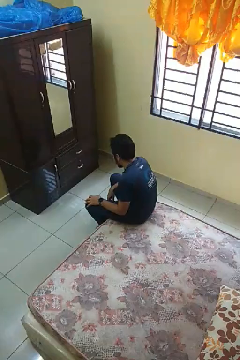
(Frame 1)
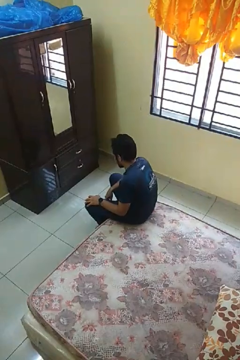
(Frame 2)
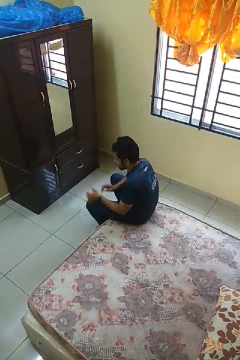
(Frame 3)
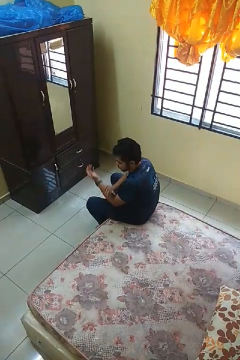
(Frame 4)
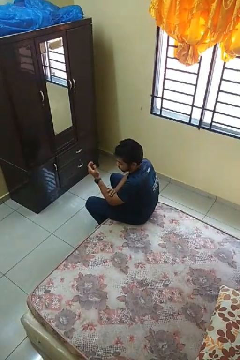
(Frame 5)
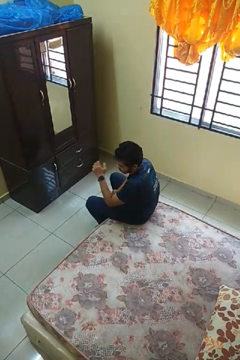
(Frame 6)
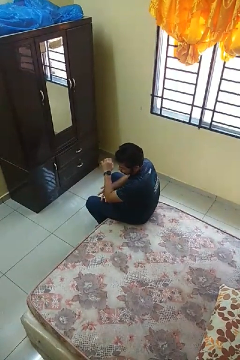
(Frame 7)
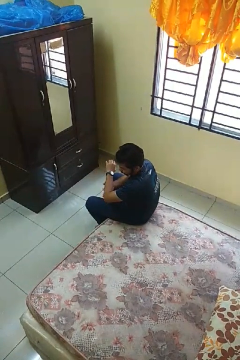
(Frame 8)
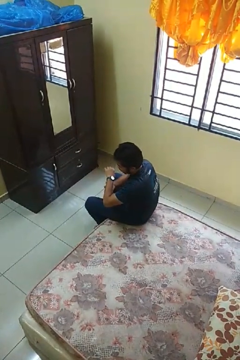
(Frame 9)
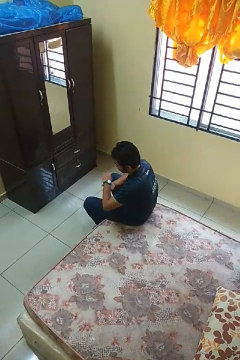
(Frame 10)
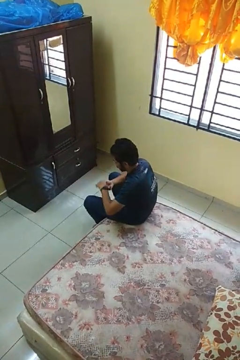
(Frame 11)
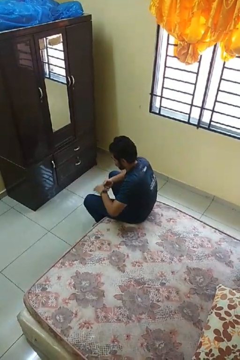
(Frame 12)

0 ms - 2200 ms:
person looks at hands in lap

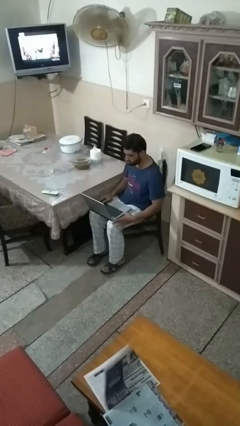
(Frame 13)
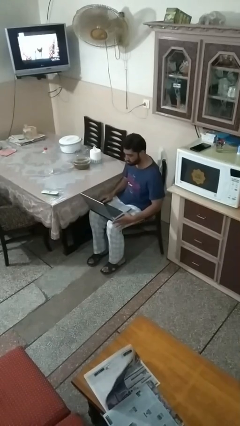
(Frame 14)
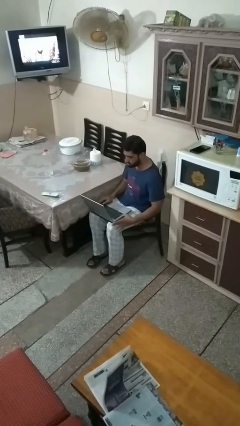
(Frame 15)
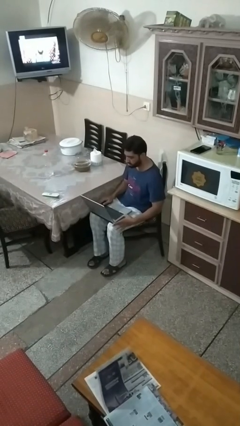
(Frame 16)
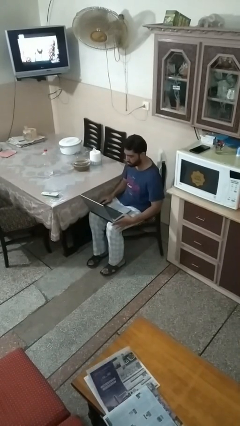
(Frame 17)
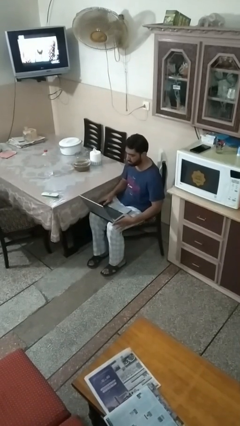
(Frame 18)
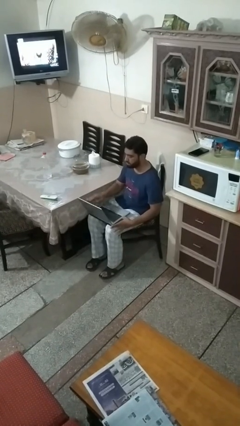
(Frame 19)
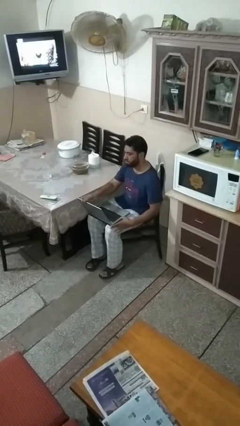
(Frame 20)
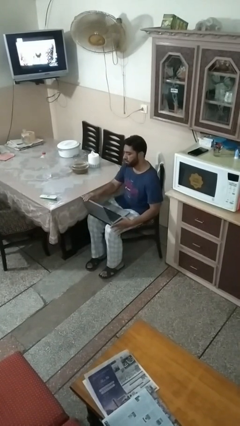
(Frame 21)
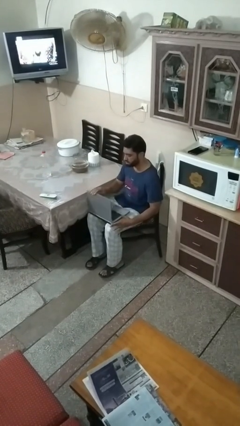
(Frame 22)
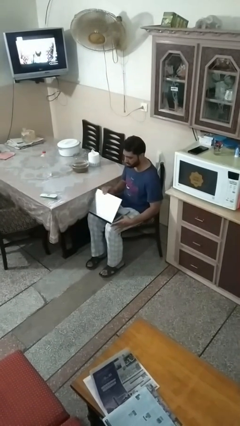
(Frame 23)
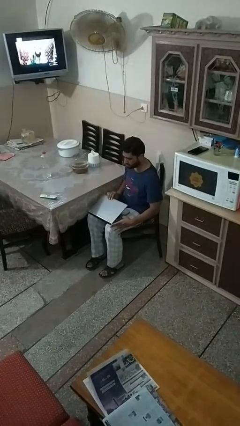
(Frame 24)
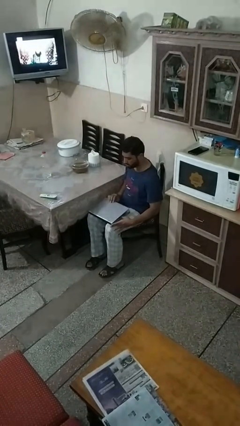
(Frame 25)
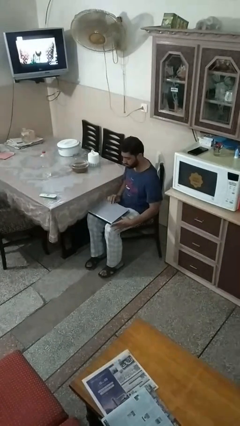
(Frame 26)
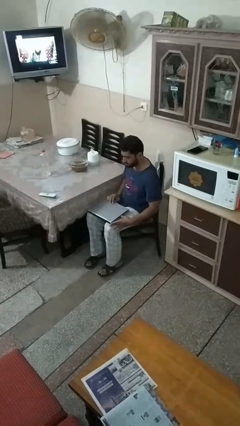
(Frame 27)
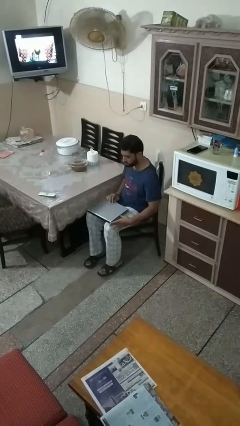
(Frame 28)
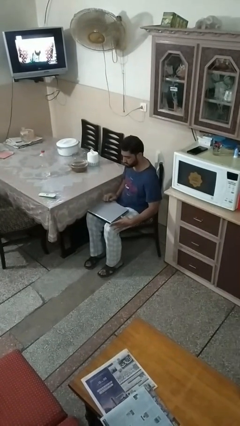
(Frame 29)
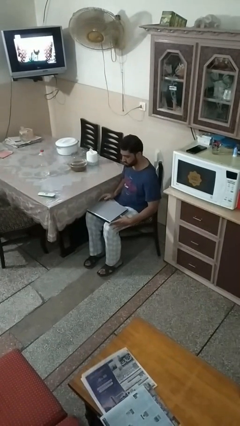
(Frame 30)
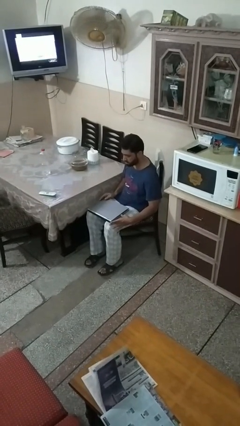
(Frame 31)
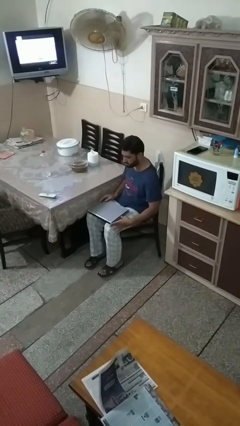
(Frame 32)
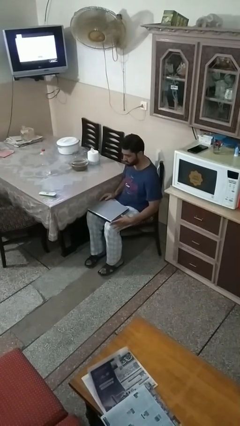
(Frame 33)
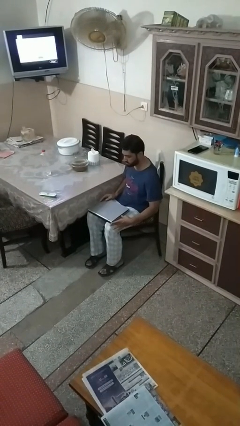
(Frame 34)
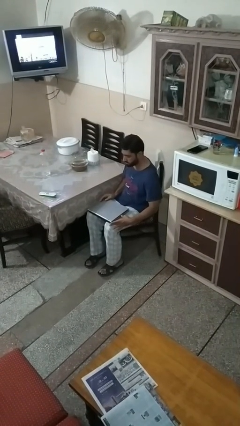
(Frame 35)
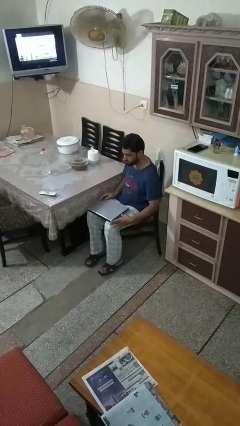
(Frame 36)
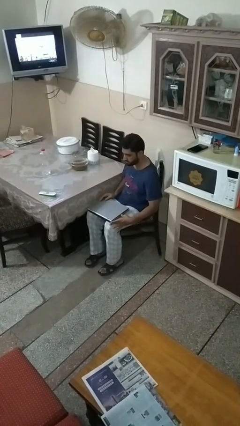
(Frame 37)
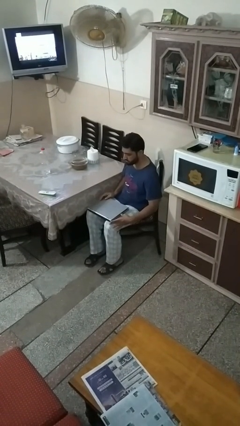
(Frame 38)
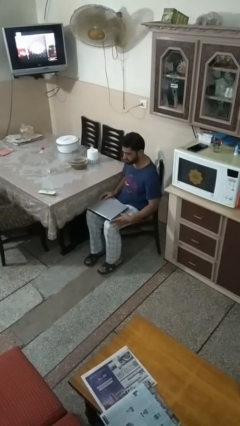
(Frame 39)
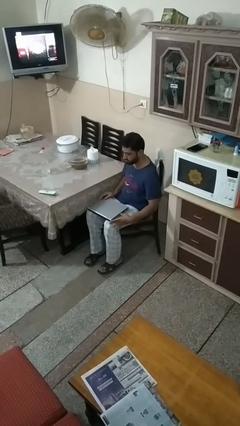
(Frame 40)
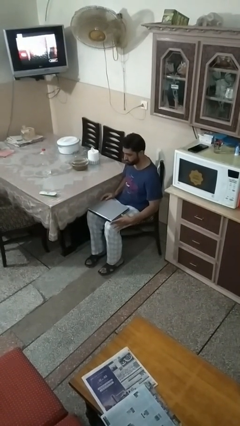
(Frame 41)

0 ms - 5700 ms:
person closes laptop

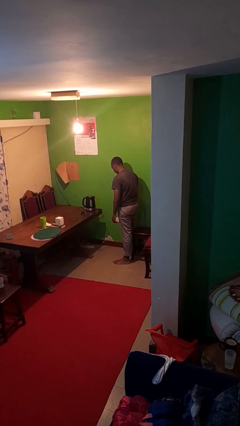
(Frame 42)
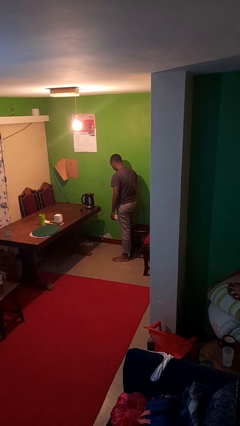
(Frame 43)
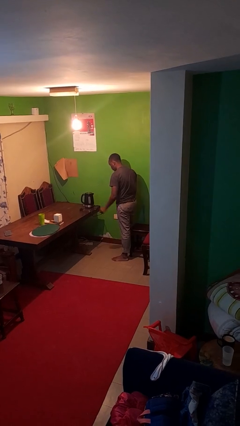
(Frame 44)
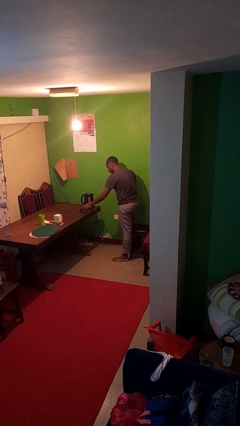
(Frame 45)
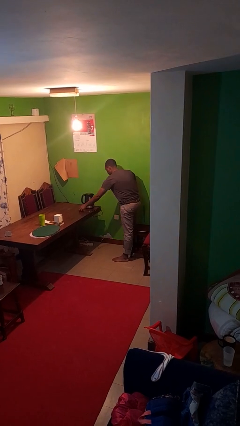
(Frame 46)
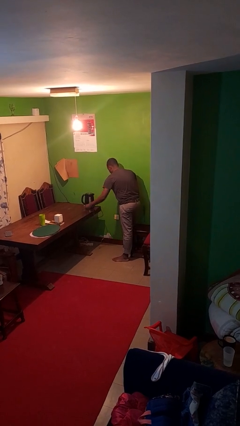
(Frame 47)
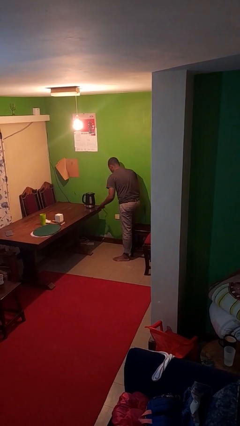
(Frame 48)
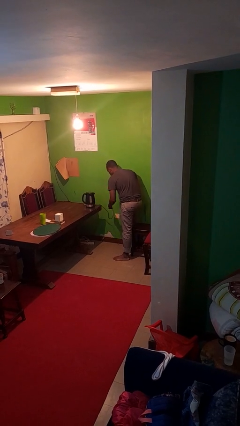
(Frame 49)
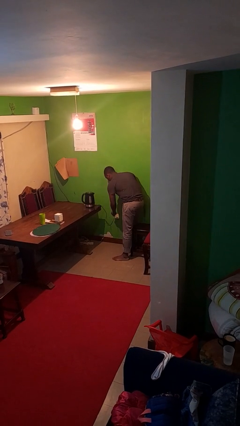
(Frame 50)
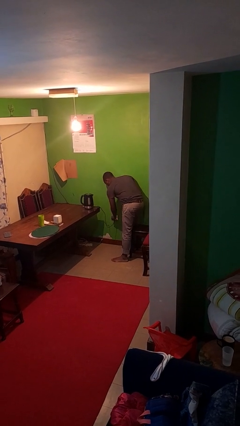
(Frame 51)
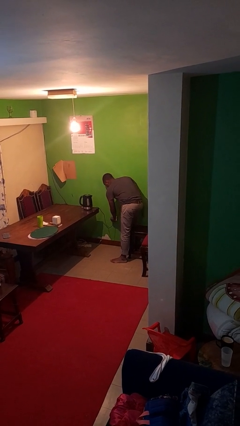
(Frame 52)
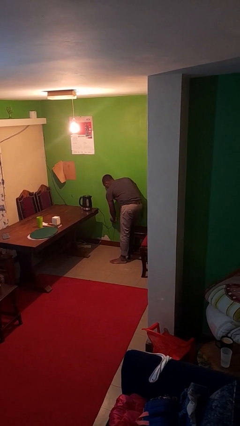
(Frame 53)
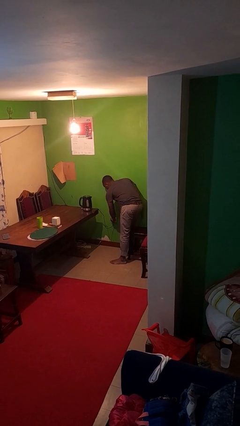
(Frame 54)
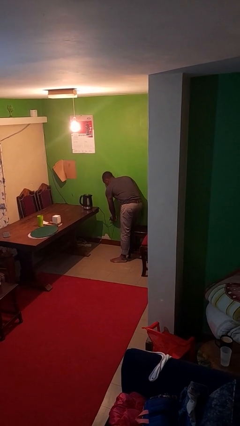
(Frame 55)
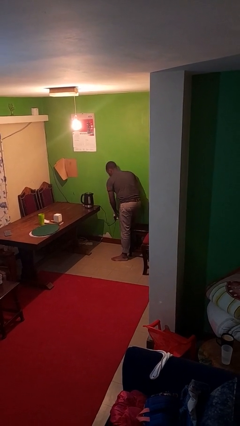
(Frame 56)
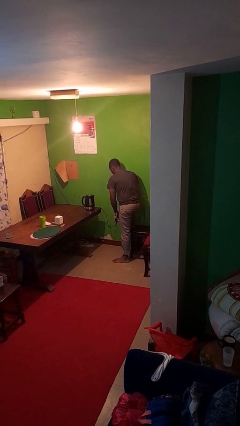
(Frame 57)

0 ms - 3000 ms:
person plugs into electrical socket

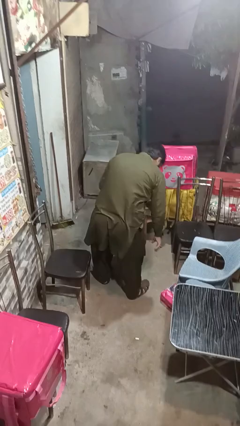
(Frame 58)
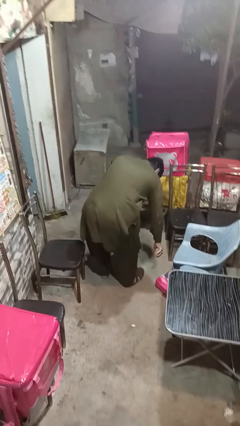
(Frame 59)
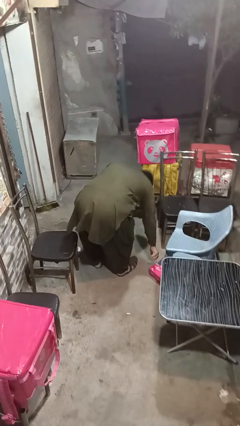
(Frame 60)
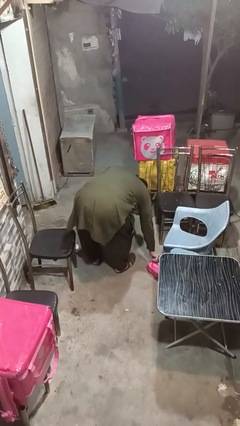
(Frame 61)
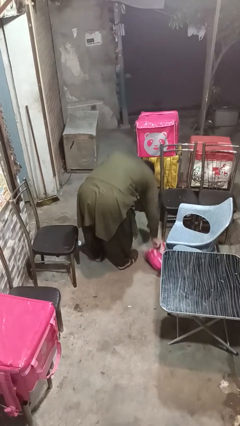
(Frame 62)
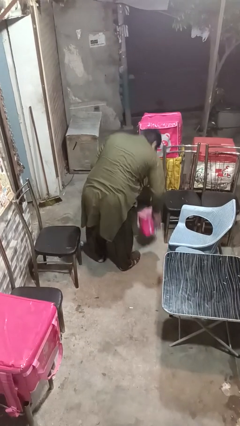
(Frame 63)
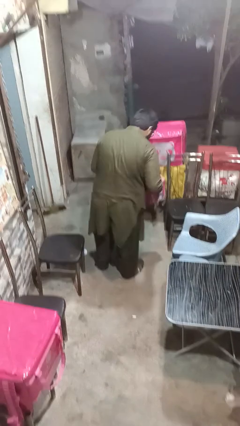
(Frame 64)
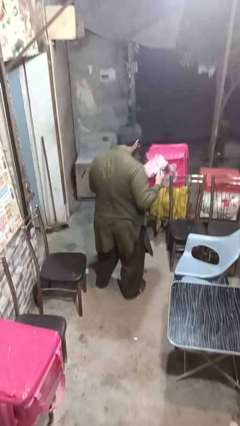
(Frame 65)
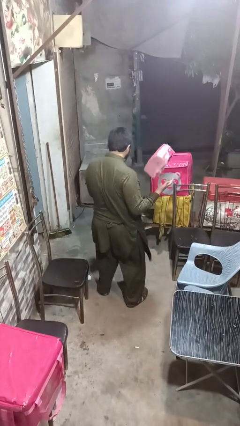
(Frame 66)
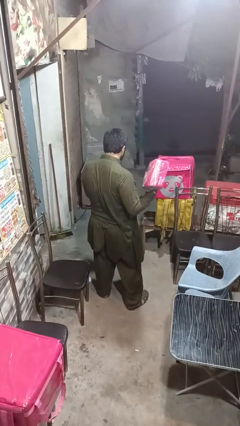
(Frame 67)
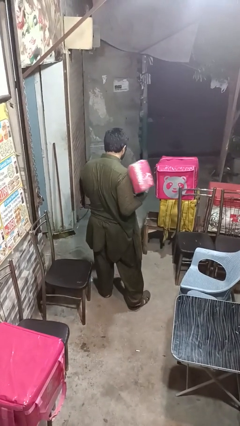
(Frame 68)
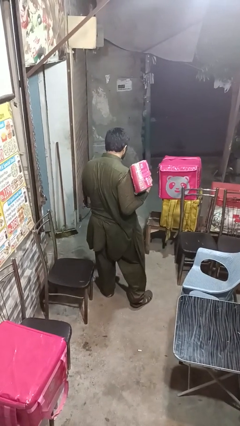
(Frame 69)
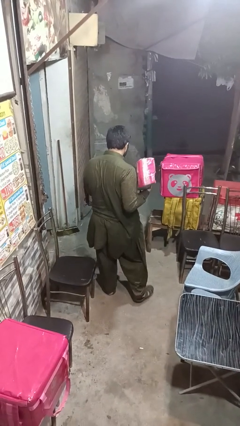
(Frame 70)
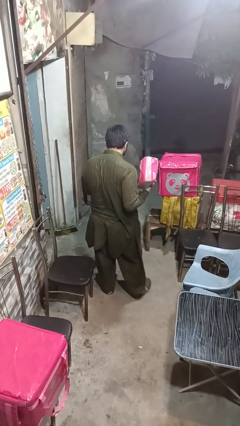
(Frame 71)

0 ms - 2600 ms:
person picks up object from floor

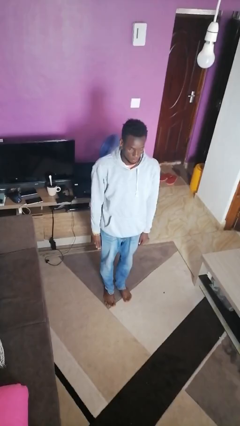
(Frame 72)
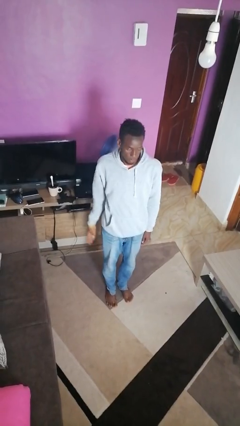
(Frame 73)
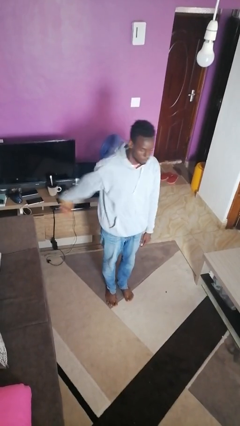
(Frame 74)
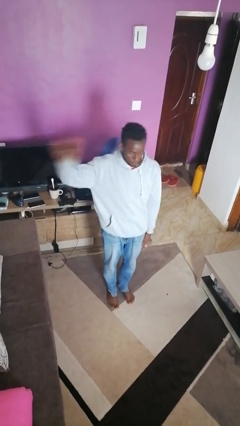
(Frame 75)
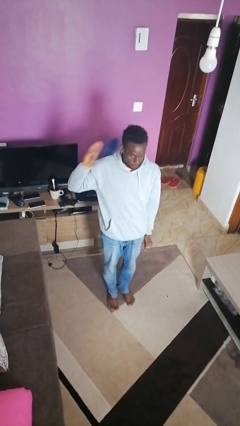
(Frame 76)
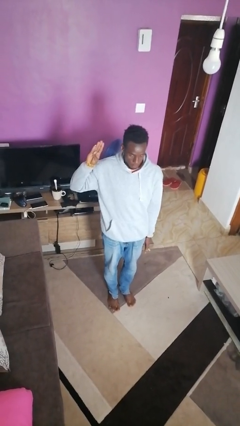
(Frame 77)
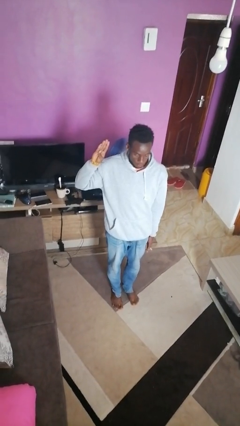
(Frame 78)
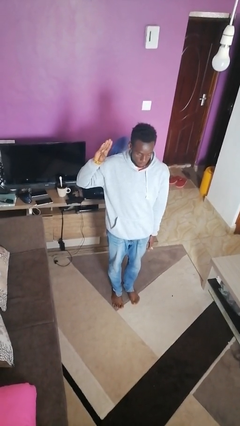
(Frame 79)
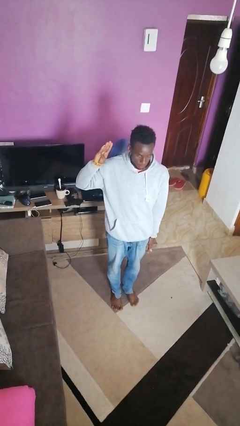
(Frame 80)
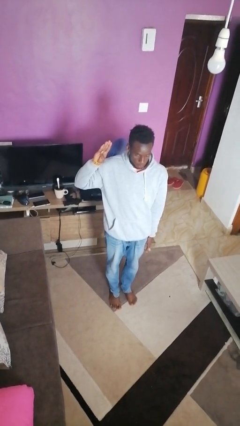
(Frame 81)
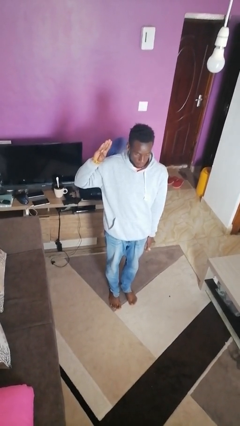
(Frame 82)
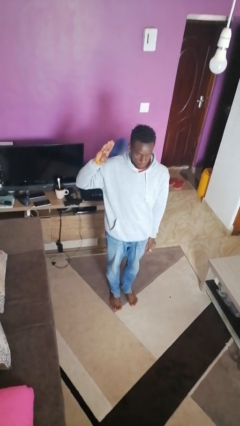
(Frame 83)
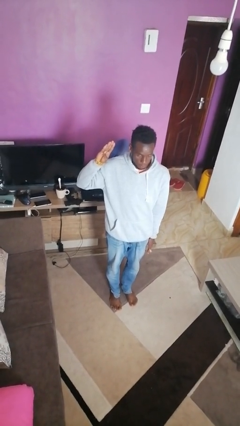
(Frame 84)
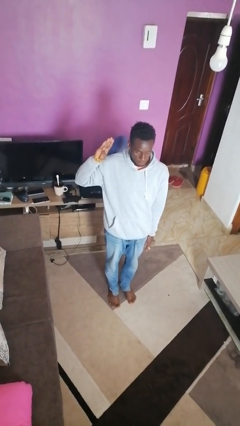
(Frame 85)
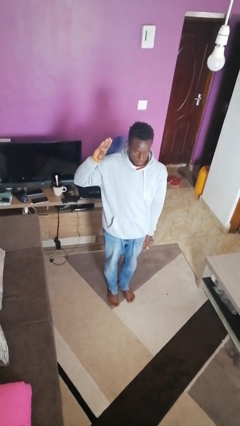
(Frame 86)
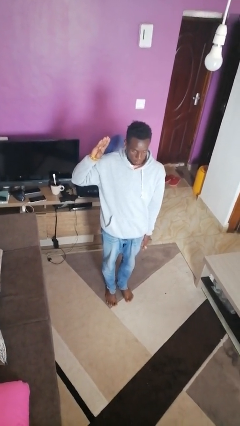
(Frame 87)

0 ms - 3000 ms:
person salutes

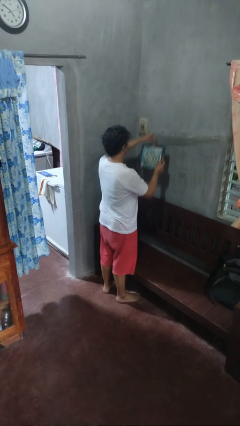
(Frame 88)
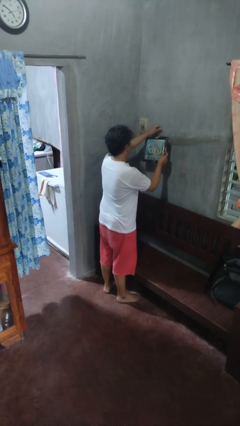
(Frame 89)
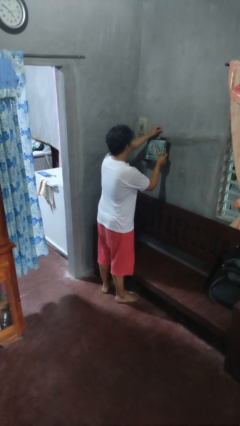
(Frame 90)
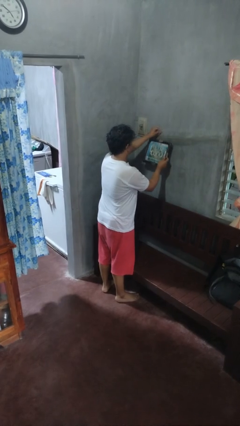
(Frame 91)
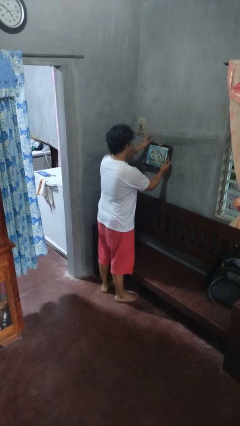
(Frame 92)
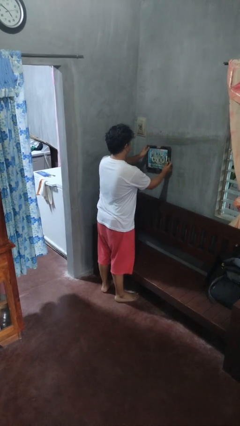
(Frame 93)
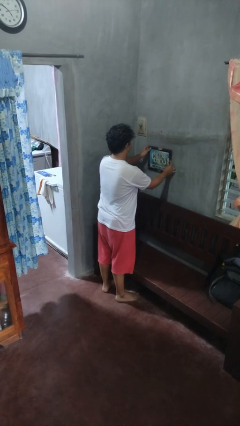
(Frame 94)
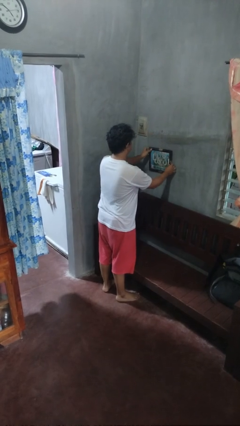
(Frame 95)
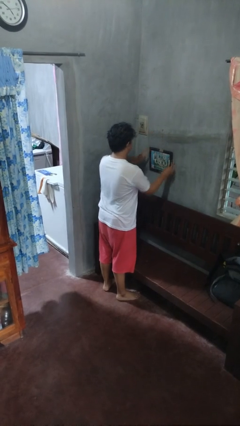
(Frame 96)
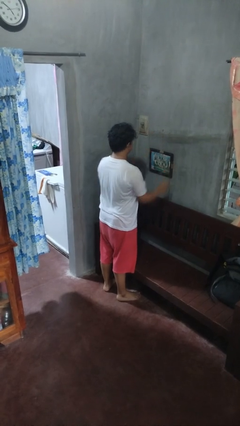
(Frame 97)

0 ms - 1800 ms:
person puts up picture frame
